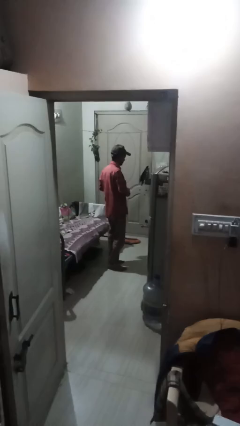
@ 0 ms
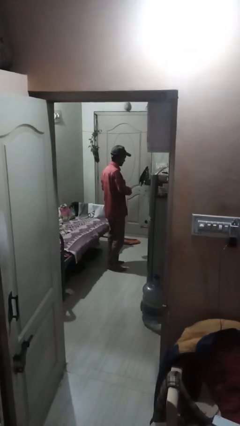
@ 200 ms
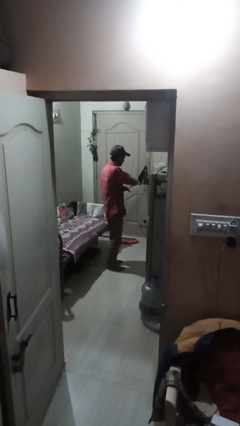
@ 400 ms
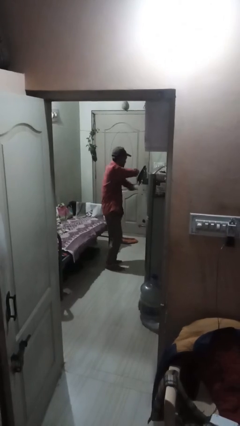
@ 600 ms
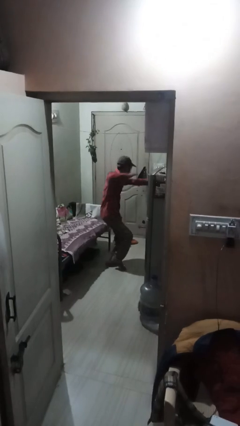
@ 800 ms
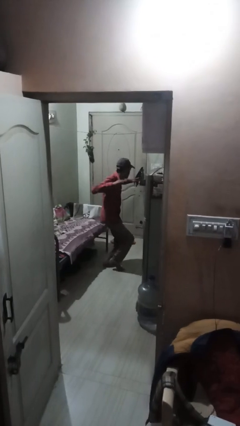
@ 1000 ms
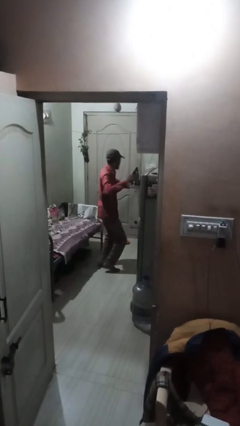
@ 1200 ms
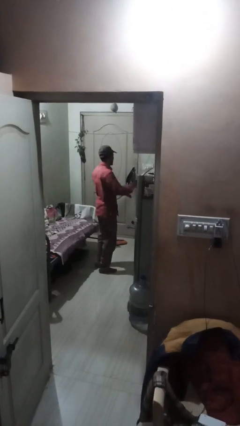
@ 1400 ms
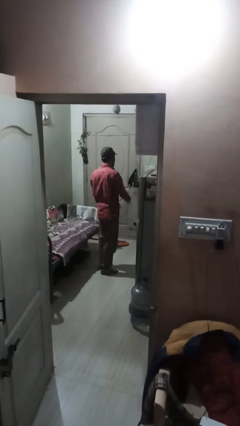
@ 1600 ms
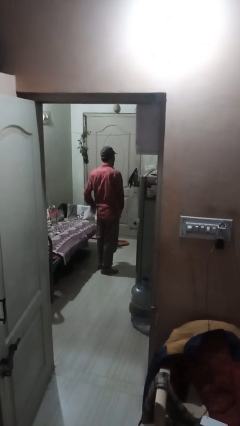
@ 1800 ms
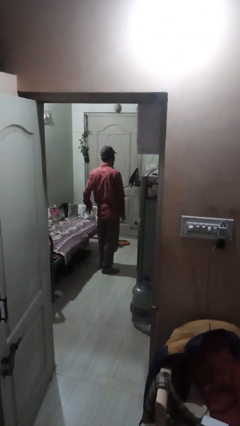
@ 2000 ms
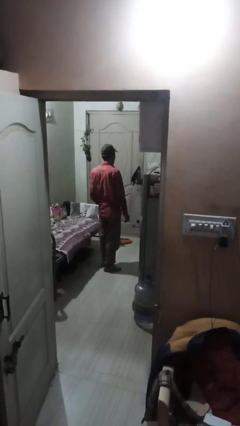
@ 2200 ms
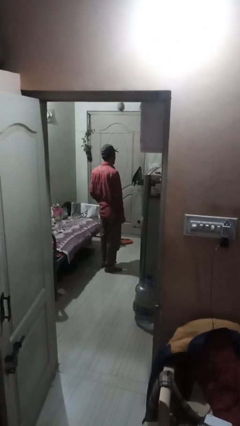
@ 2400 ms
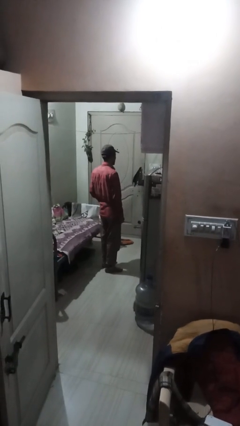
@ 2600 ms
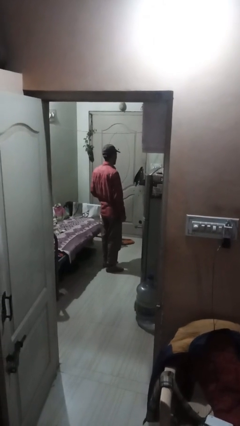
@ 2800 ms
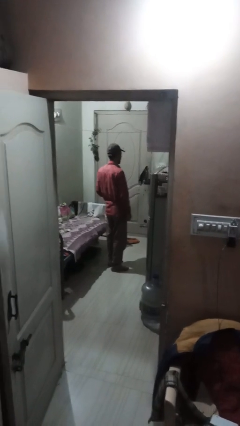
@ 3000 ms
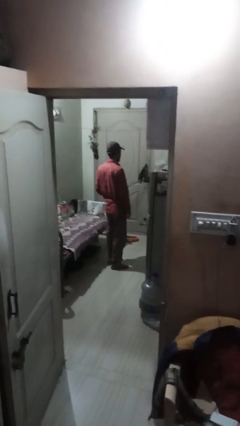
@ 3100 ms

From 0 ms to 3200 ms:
person karate chop

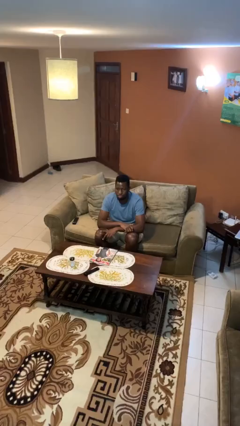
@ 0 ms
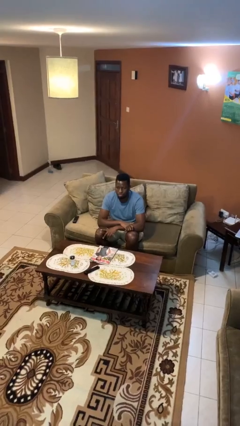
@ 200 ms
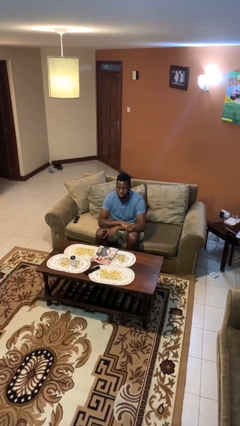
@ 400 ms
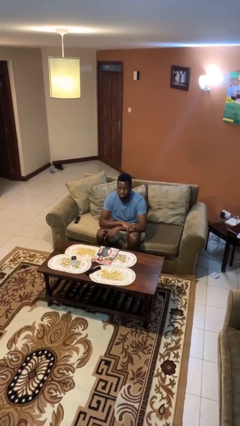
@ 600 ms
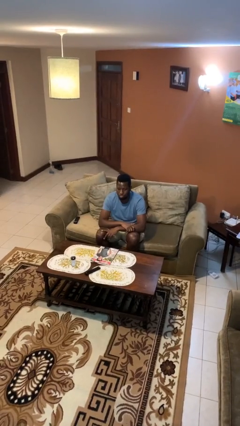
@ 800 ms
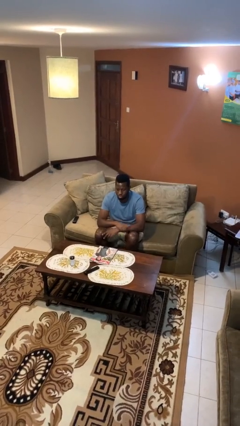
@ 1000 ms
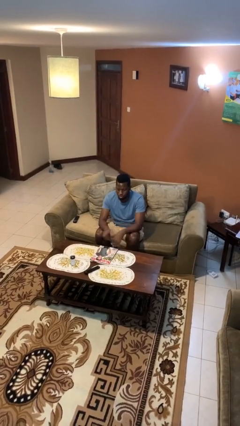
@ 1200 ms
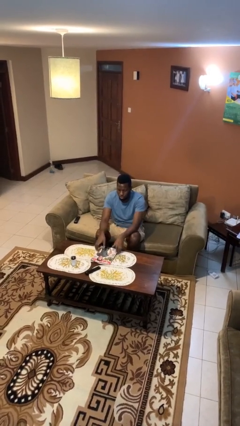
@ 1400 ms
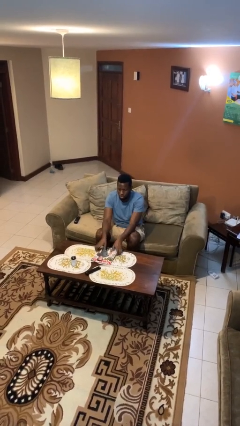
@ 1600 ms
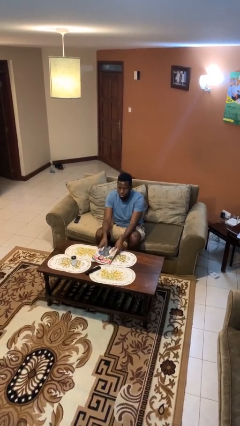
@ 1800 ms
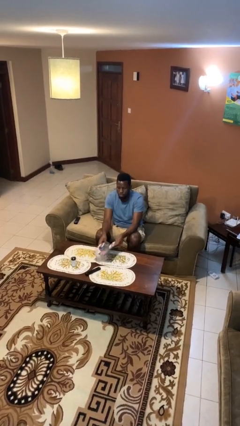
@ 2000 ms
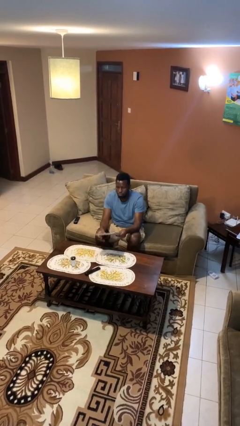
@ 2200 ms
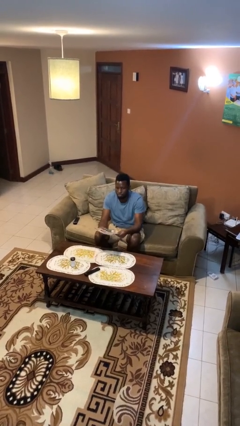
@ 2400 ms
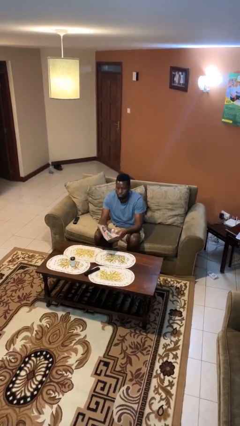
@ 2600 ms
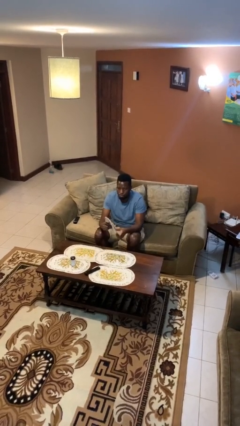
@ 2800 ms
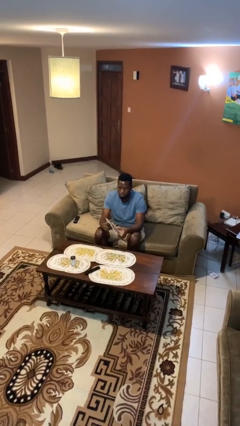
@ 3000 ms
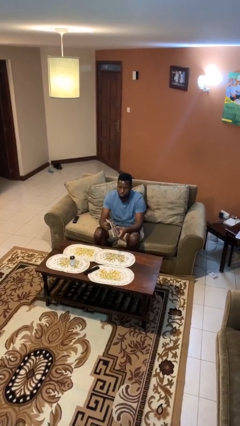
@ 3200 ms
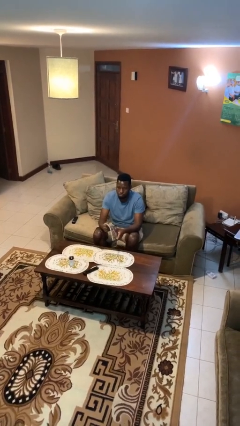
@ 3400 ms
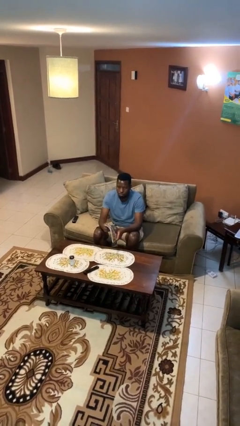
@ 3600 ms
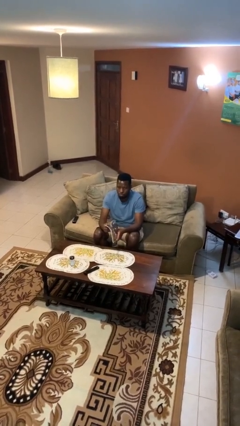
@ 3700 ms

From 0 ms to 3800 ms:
person picks up object from table

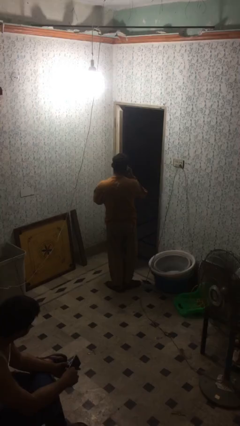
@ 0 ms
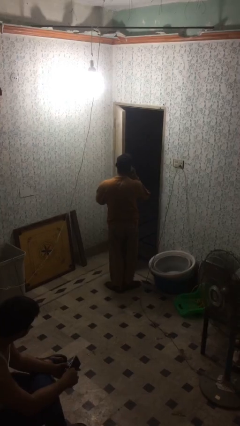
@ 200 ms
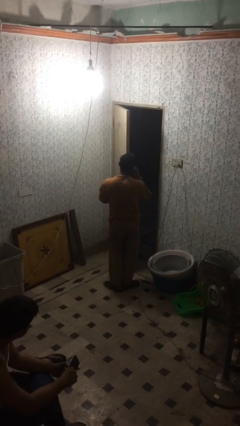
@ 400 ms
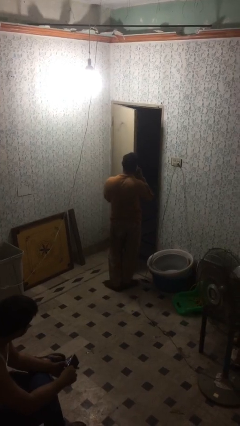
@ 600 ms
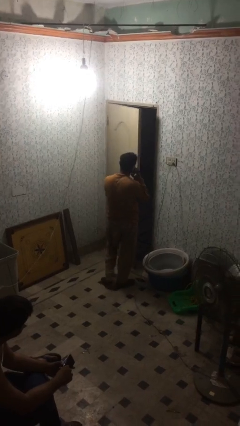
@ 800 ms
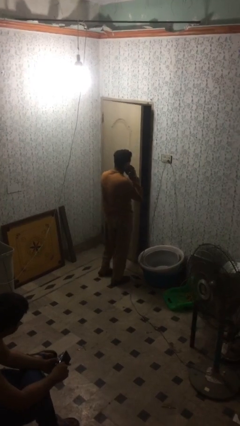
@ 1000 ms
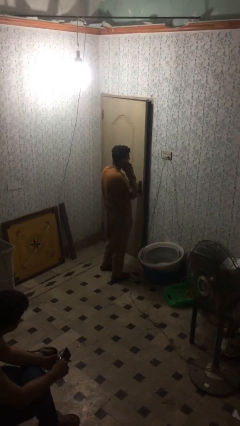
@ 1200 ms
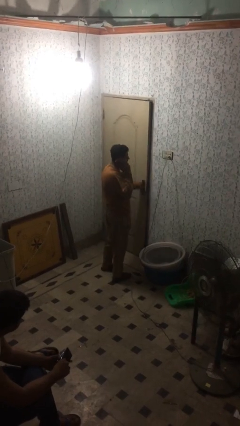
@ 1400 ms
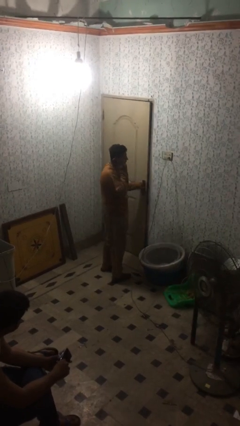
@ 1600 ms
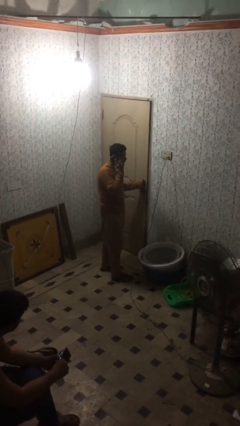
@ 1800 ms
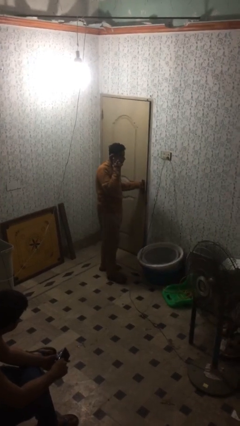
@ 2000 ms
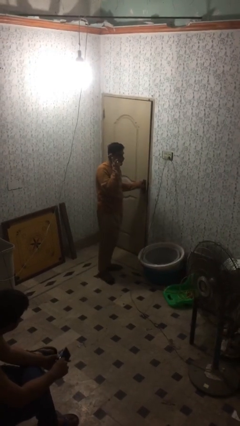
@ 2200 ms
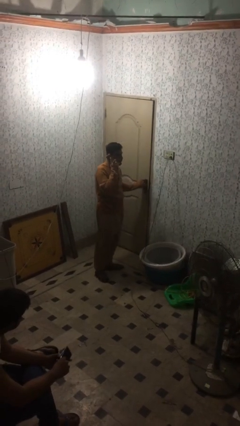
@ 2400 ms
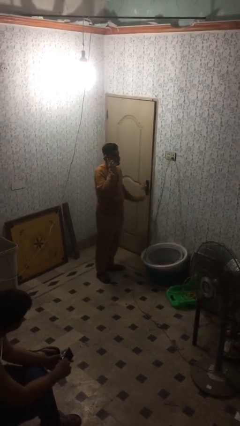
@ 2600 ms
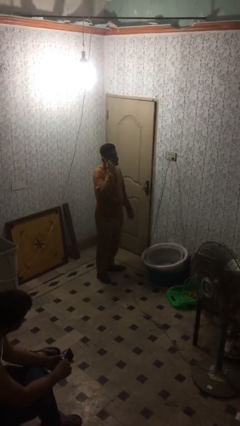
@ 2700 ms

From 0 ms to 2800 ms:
person closes facility door

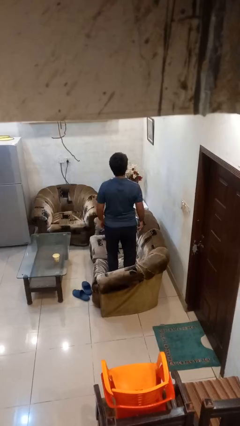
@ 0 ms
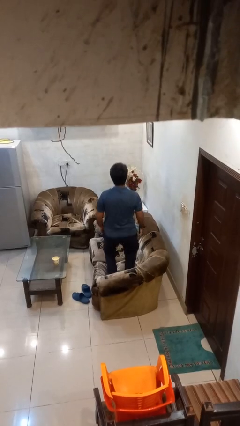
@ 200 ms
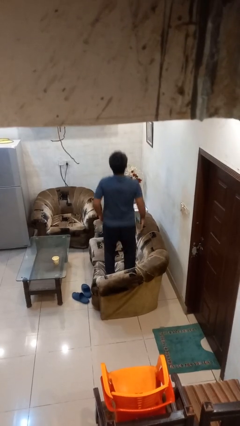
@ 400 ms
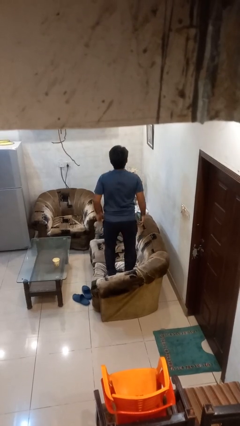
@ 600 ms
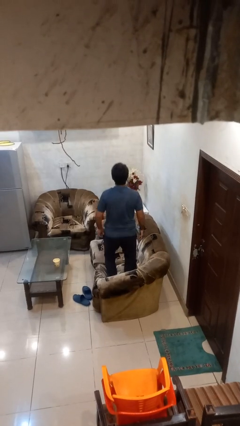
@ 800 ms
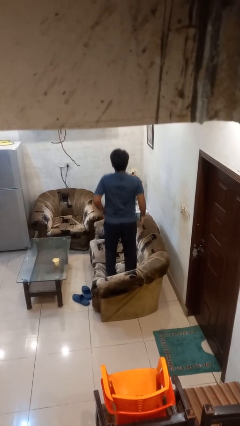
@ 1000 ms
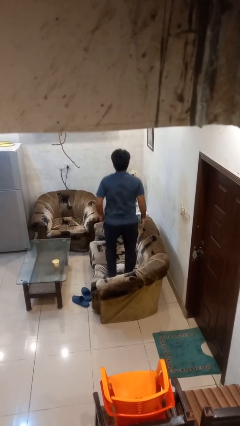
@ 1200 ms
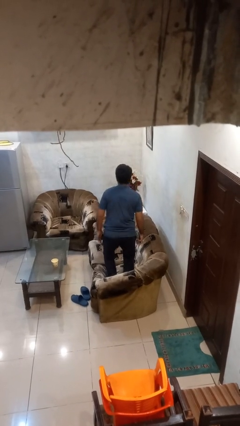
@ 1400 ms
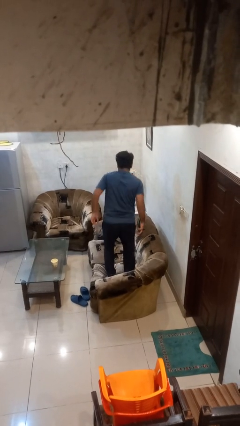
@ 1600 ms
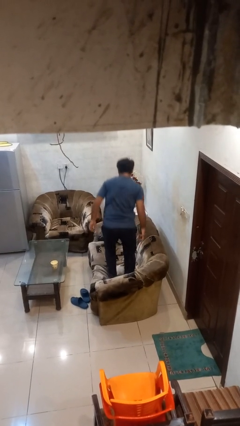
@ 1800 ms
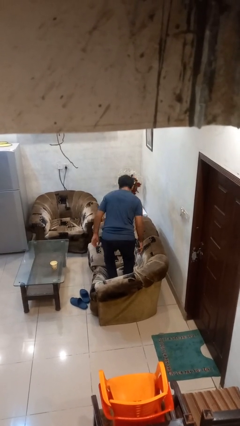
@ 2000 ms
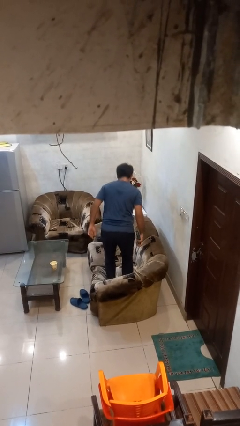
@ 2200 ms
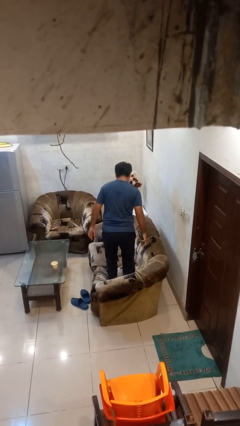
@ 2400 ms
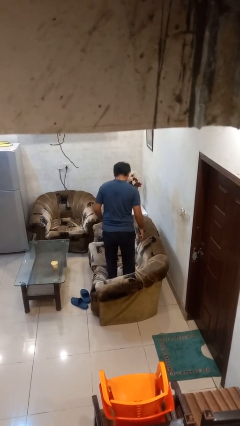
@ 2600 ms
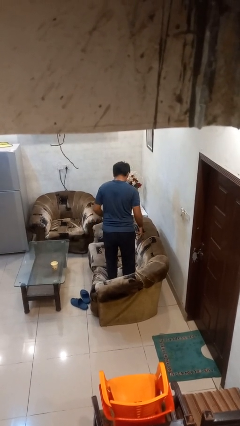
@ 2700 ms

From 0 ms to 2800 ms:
person jumps on couch

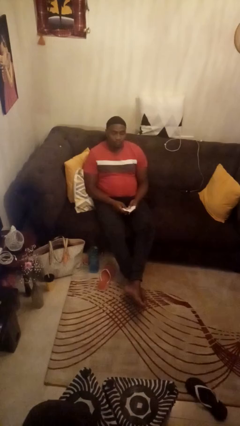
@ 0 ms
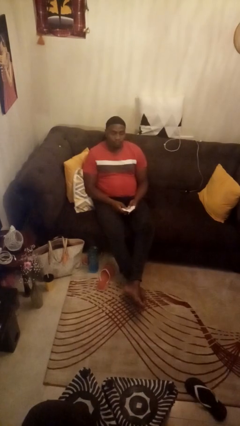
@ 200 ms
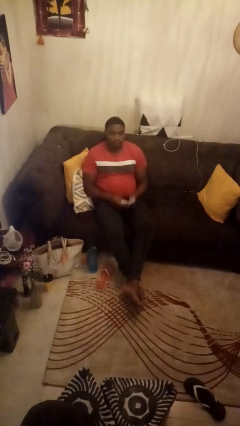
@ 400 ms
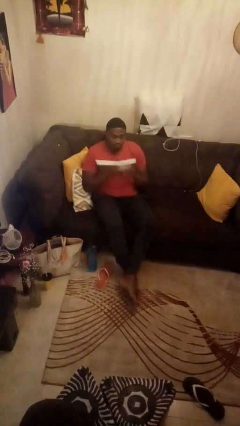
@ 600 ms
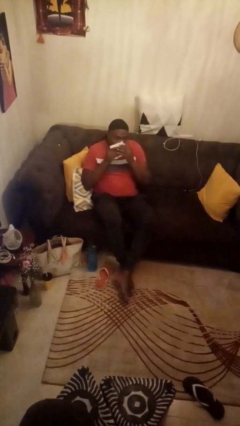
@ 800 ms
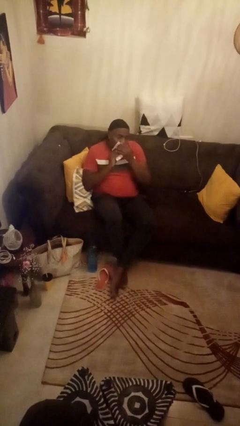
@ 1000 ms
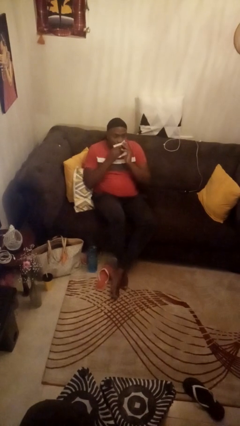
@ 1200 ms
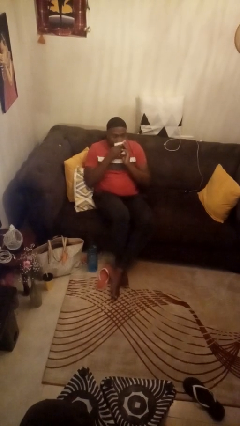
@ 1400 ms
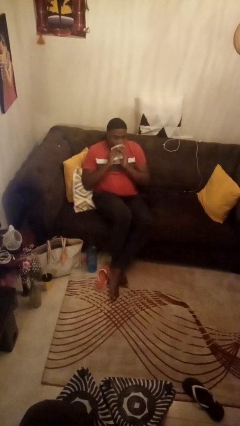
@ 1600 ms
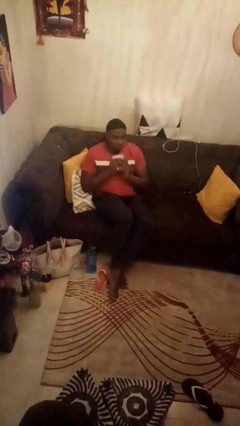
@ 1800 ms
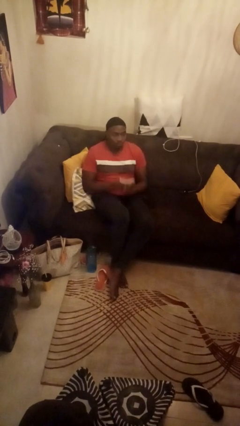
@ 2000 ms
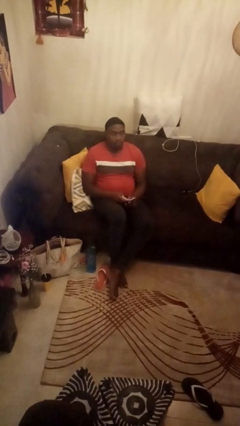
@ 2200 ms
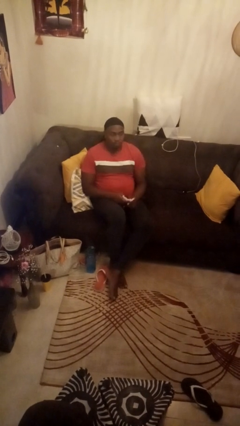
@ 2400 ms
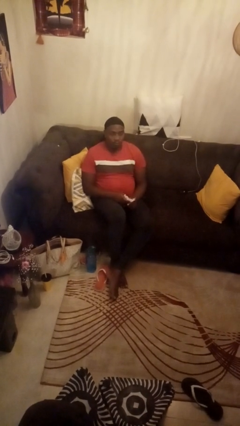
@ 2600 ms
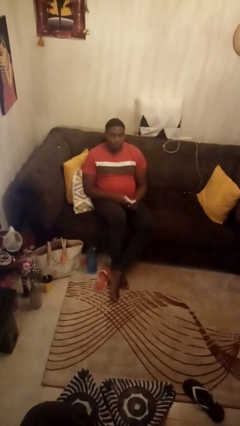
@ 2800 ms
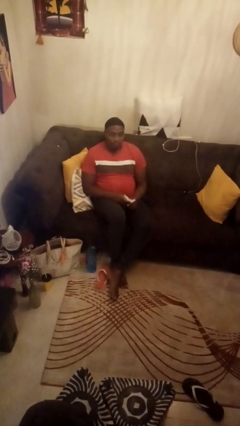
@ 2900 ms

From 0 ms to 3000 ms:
person wipes mouth with napkin

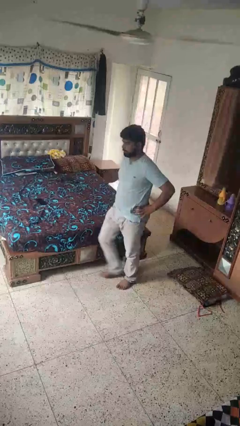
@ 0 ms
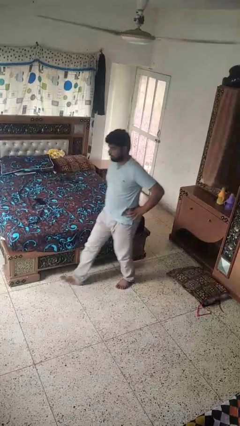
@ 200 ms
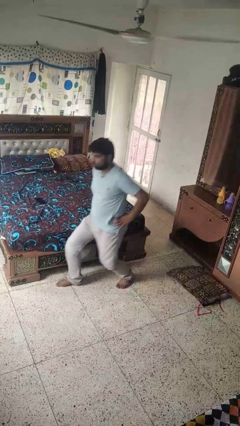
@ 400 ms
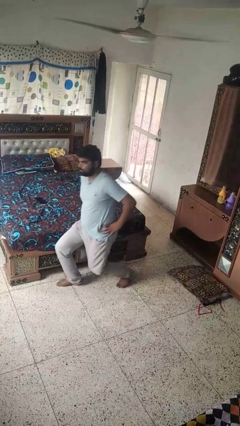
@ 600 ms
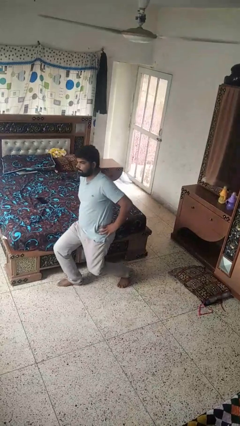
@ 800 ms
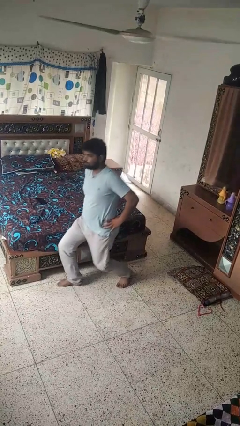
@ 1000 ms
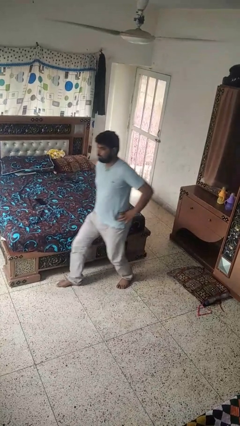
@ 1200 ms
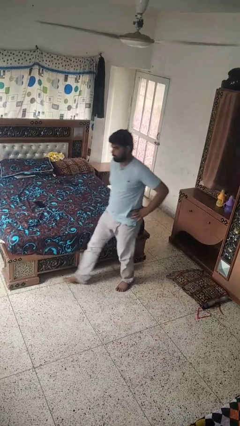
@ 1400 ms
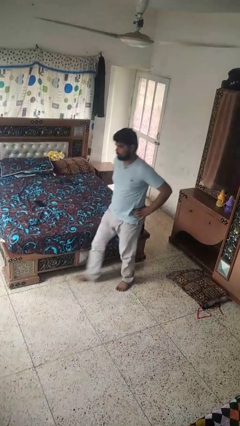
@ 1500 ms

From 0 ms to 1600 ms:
person exercises with lunges
